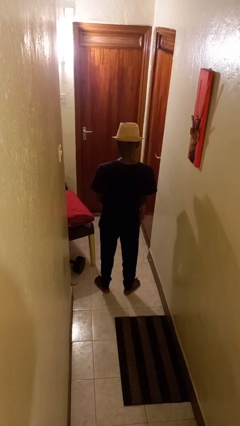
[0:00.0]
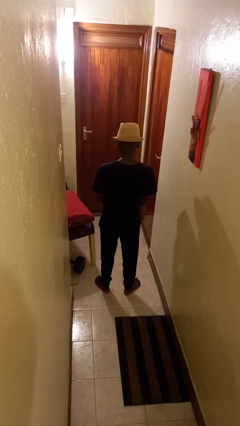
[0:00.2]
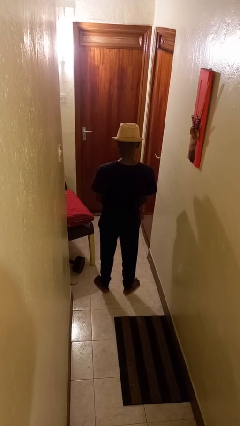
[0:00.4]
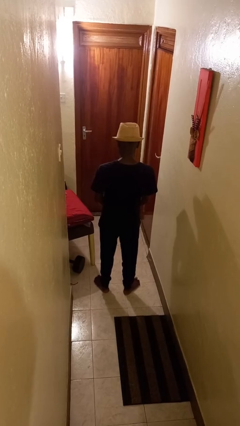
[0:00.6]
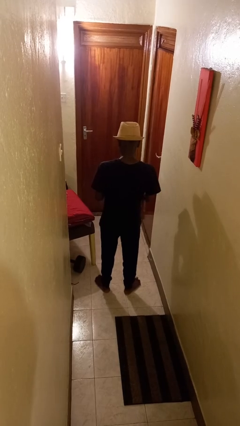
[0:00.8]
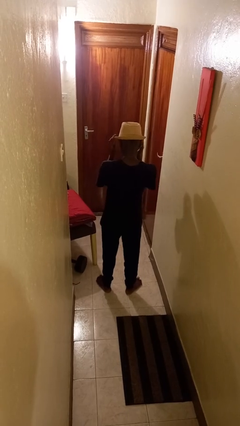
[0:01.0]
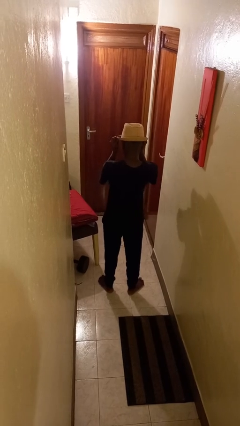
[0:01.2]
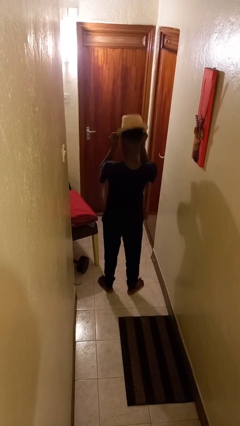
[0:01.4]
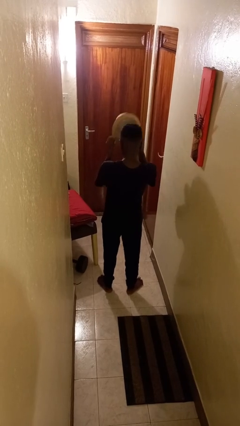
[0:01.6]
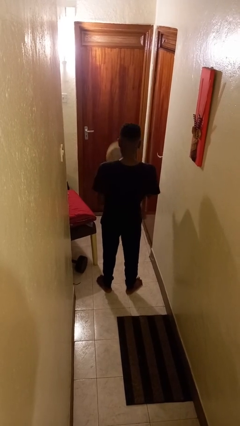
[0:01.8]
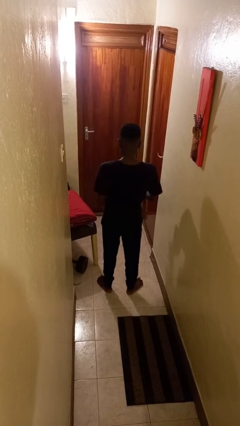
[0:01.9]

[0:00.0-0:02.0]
person takes off hat

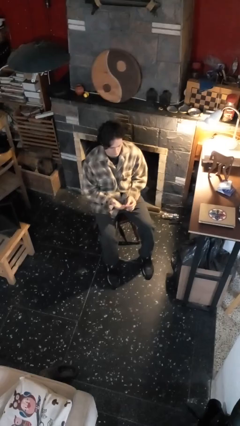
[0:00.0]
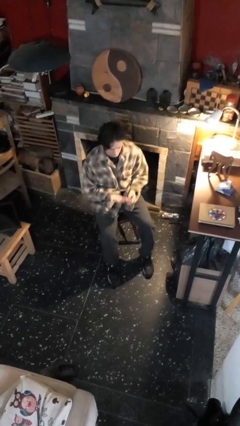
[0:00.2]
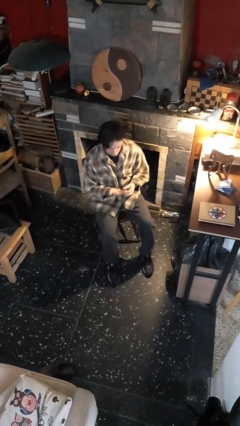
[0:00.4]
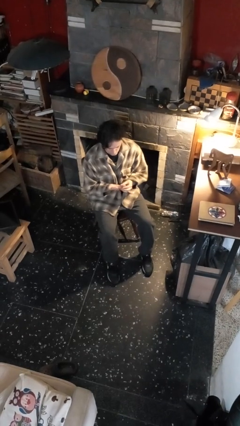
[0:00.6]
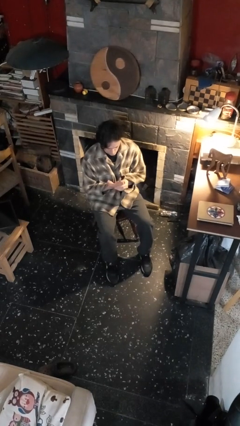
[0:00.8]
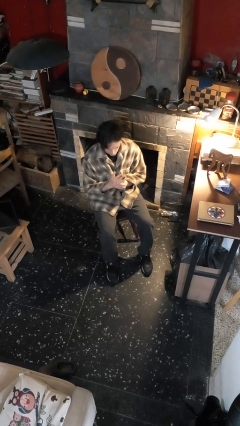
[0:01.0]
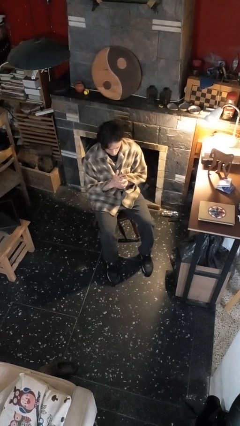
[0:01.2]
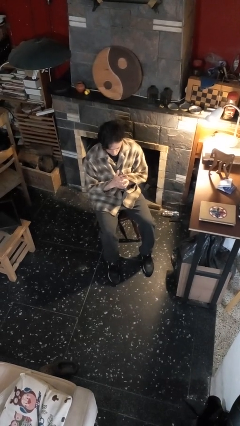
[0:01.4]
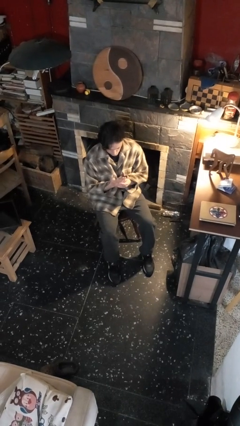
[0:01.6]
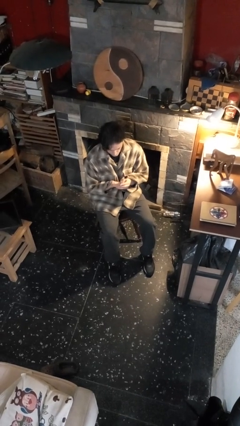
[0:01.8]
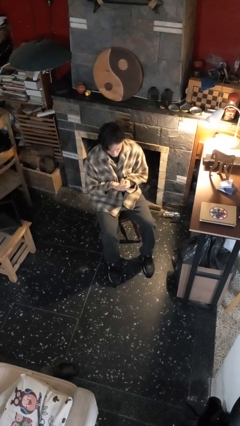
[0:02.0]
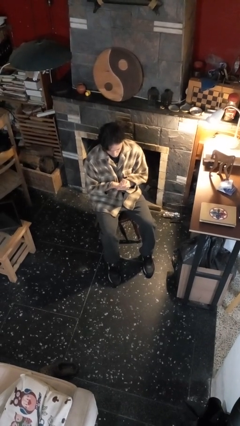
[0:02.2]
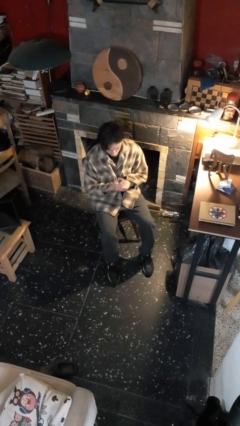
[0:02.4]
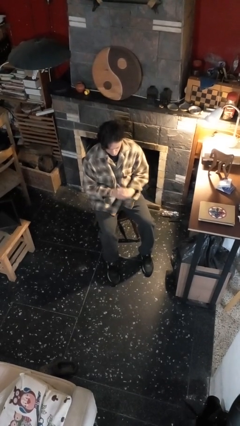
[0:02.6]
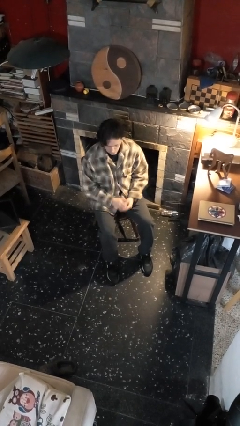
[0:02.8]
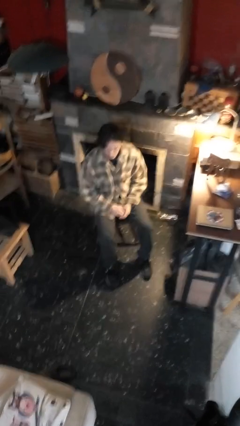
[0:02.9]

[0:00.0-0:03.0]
person looks at hands in lap

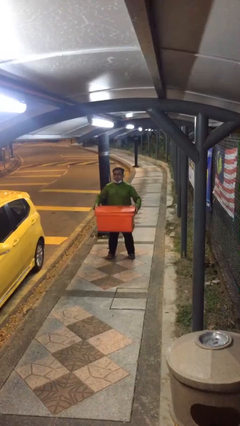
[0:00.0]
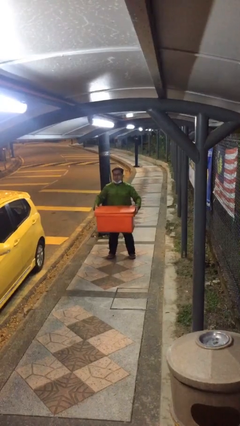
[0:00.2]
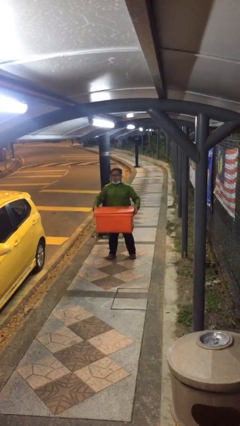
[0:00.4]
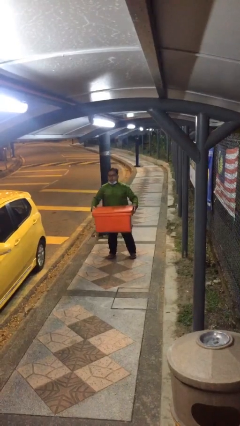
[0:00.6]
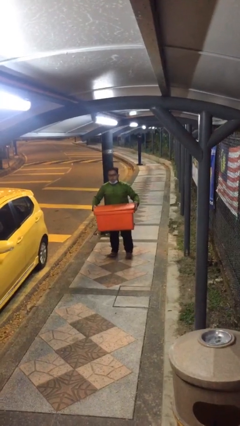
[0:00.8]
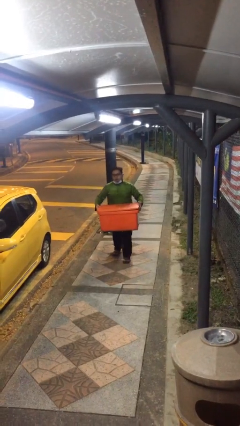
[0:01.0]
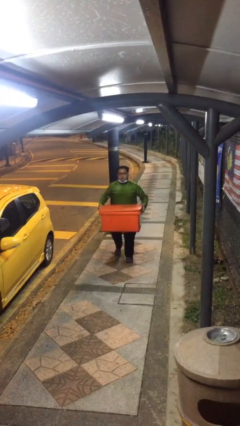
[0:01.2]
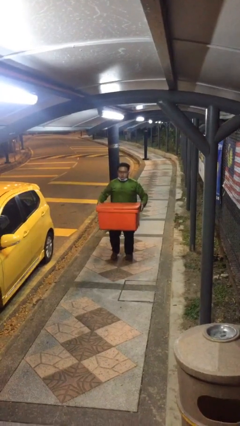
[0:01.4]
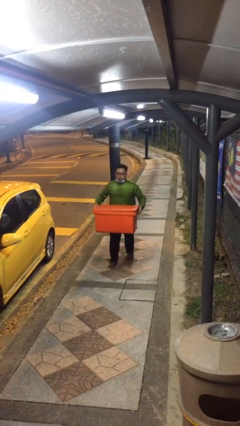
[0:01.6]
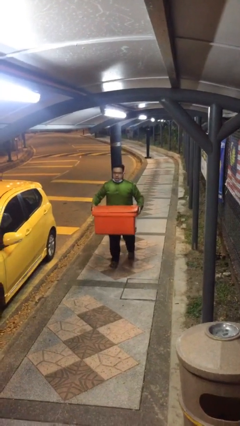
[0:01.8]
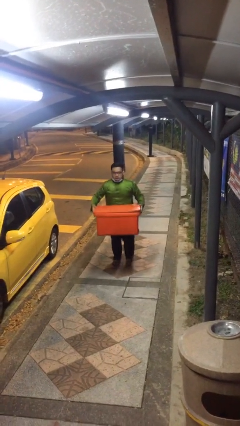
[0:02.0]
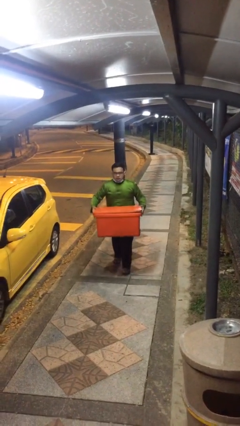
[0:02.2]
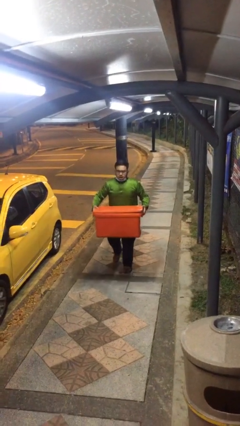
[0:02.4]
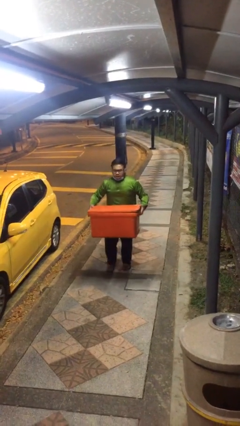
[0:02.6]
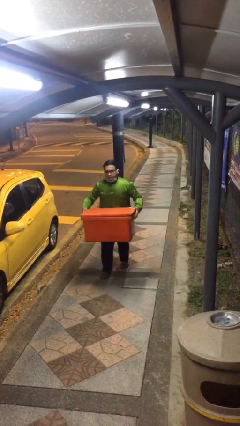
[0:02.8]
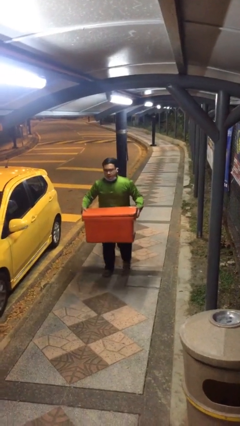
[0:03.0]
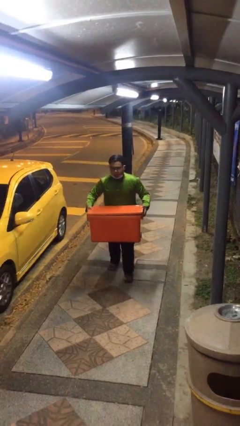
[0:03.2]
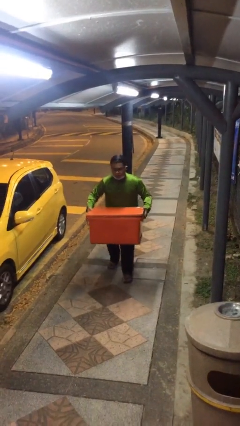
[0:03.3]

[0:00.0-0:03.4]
person carries heavy object

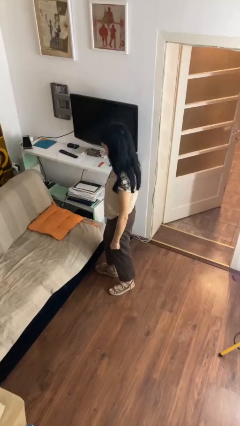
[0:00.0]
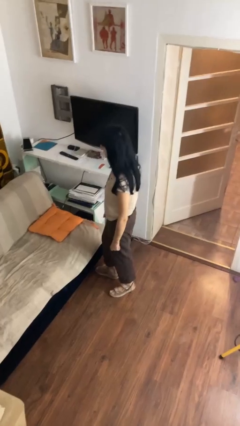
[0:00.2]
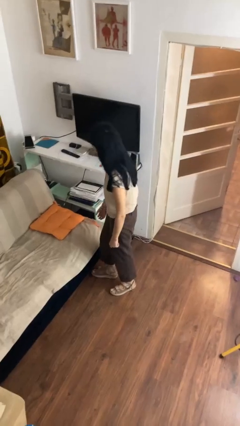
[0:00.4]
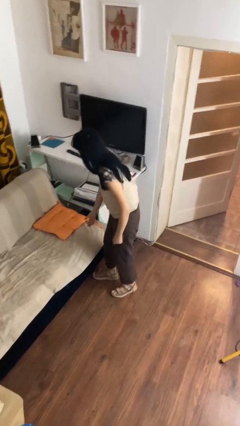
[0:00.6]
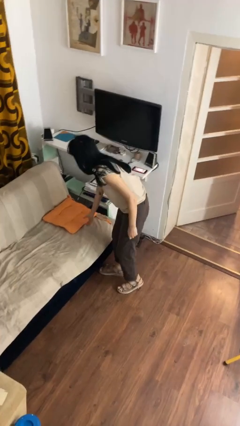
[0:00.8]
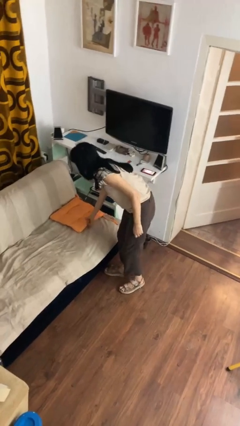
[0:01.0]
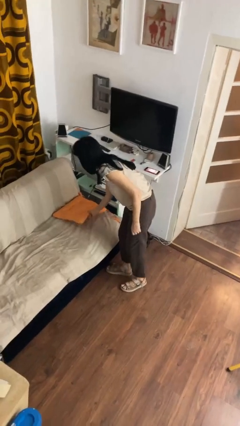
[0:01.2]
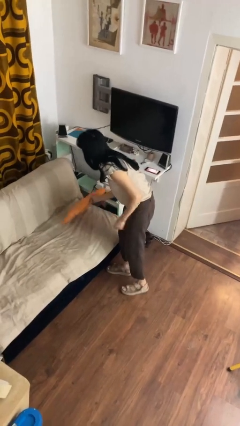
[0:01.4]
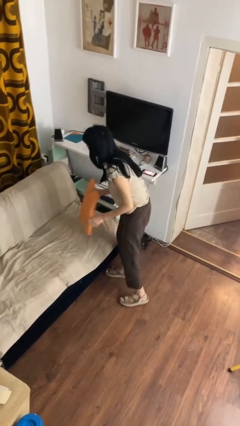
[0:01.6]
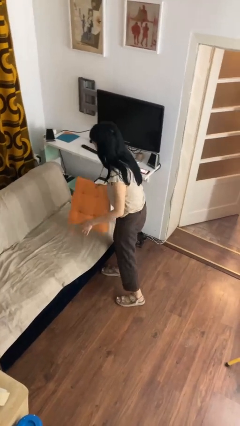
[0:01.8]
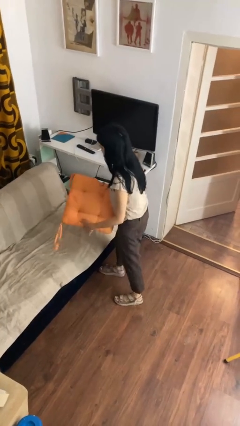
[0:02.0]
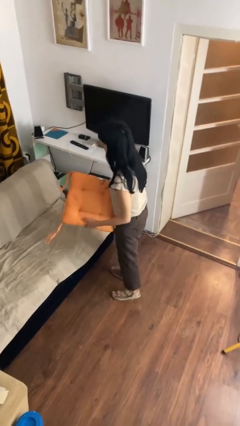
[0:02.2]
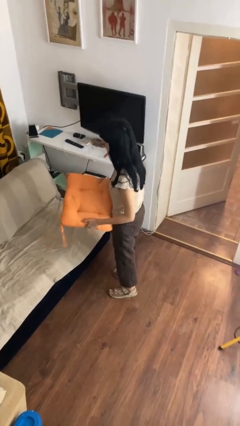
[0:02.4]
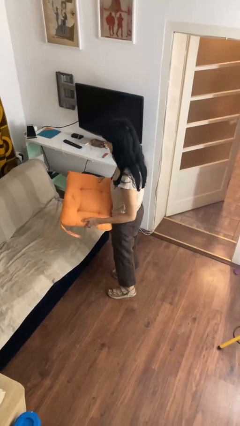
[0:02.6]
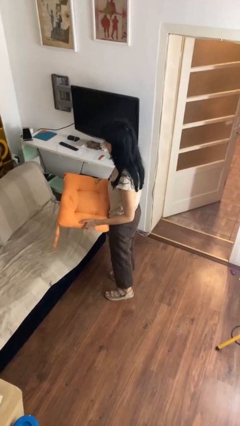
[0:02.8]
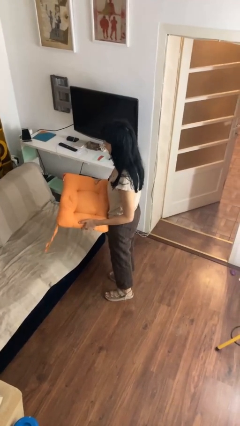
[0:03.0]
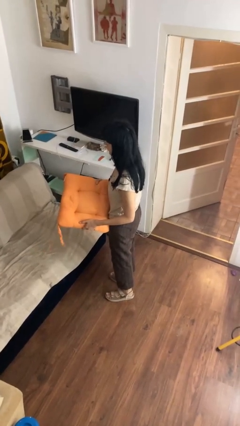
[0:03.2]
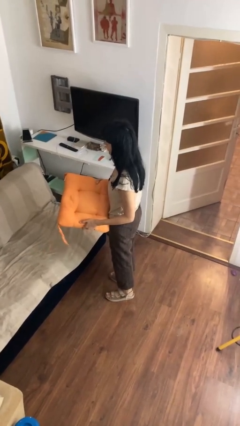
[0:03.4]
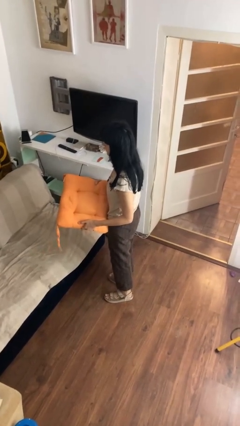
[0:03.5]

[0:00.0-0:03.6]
person picks up object from couch

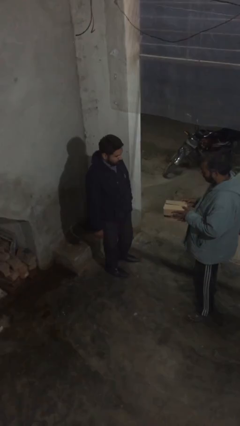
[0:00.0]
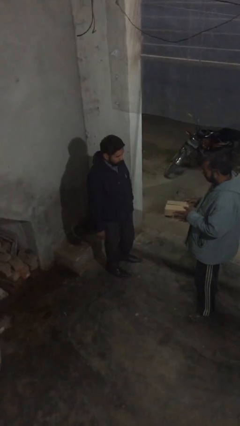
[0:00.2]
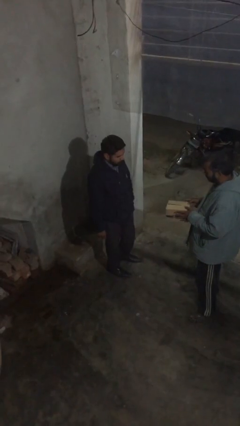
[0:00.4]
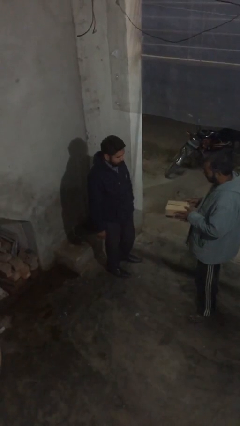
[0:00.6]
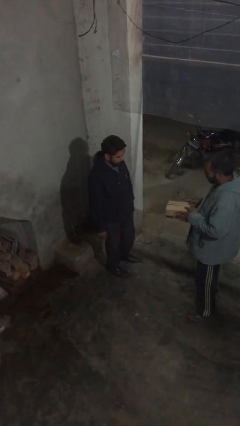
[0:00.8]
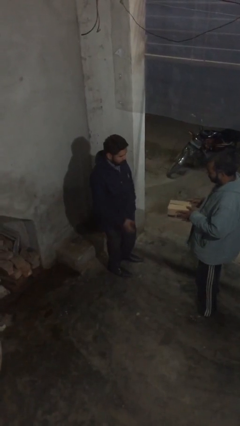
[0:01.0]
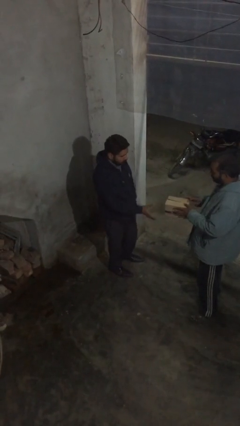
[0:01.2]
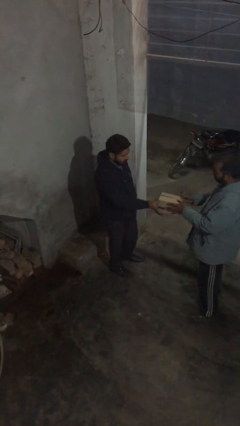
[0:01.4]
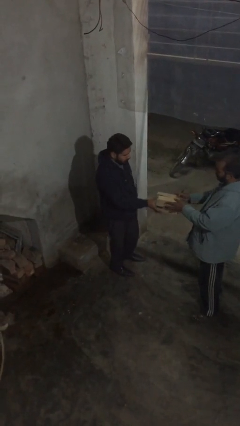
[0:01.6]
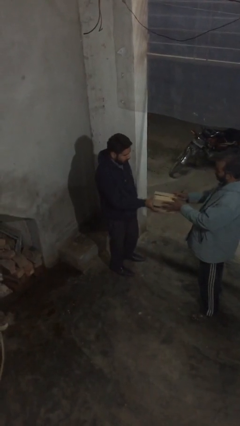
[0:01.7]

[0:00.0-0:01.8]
person transfers object to person

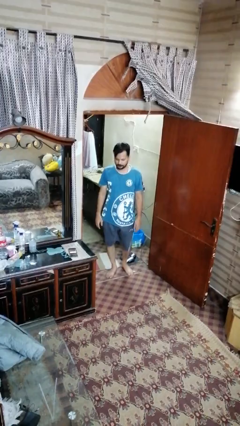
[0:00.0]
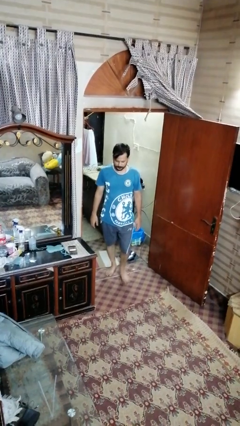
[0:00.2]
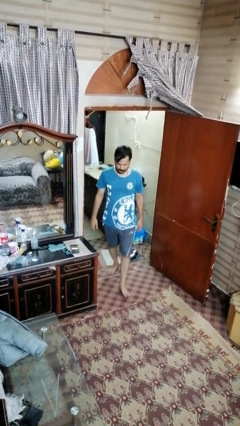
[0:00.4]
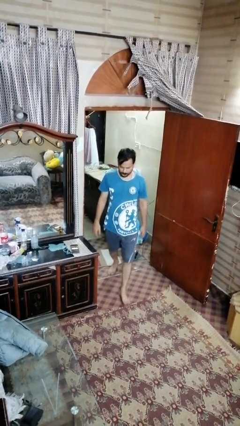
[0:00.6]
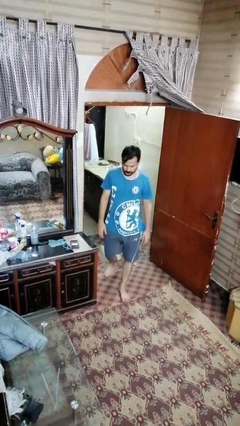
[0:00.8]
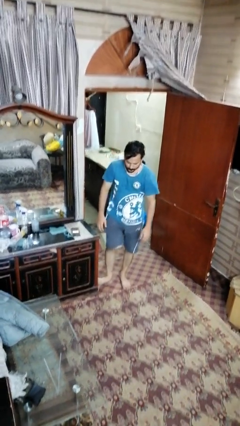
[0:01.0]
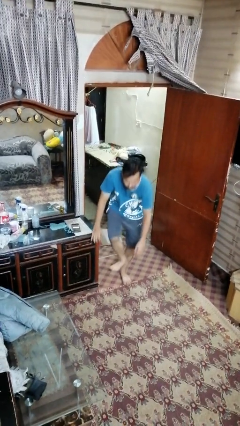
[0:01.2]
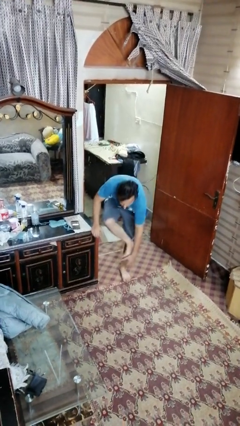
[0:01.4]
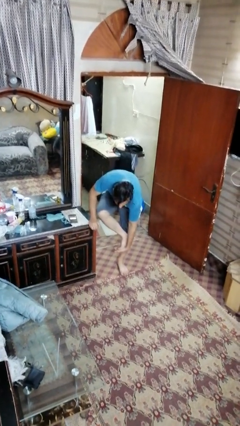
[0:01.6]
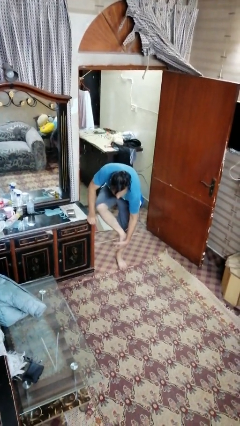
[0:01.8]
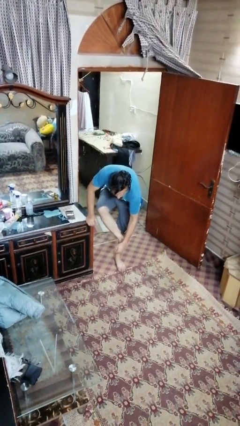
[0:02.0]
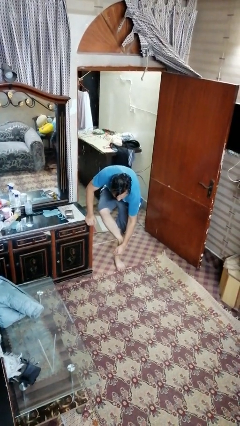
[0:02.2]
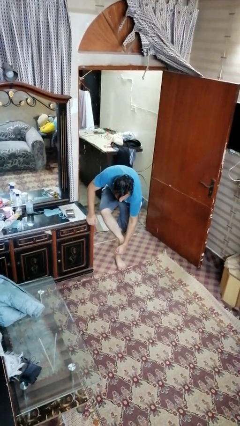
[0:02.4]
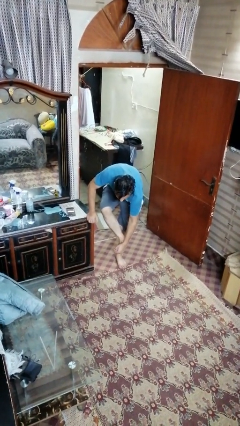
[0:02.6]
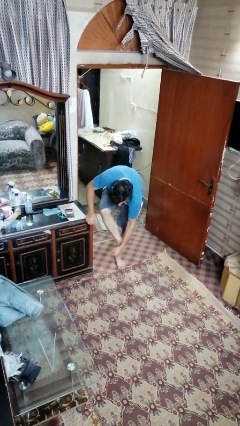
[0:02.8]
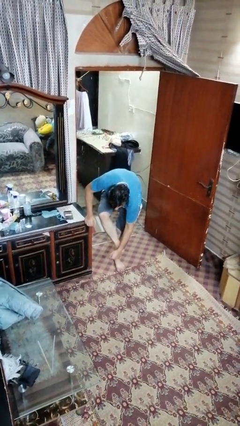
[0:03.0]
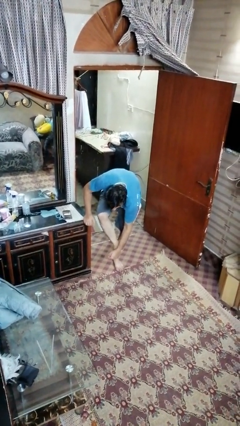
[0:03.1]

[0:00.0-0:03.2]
person trips on object on floor
